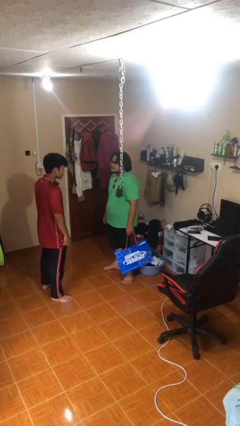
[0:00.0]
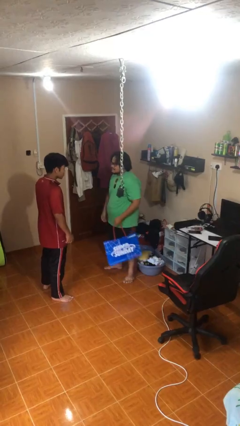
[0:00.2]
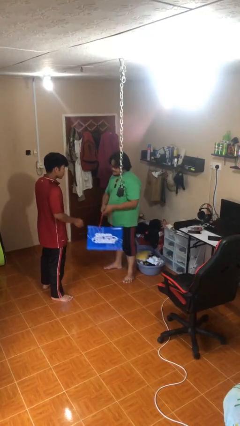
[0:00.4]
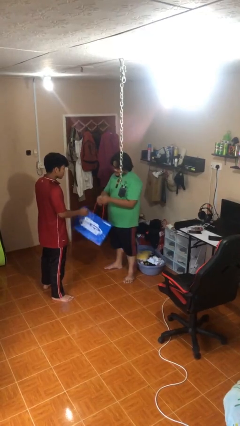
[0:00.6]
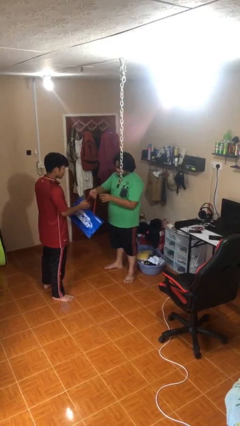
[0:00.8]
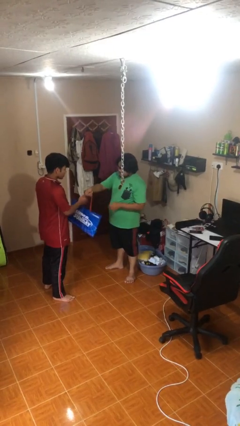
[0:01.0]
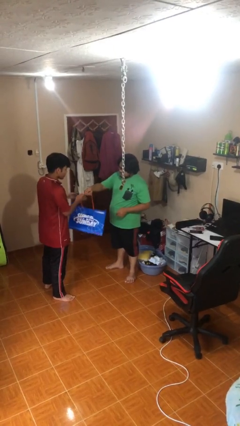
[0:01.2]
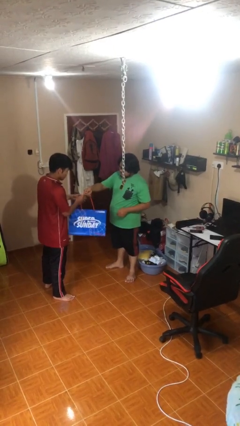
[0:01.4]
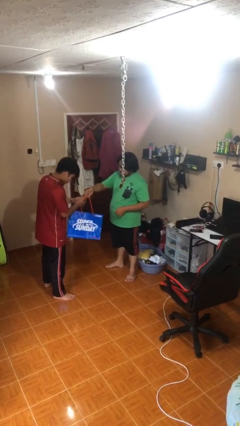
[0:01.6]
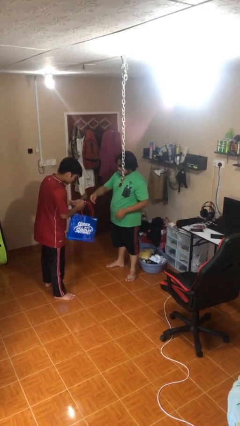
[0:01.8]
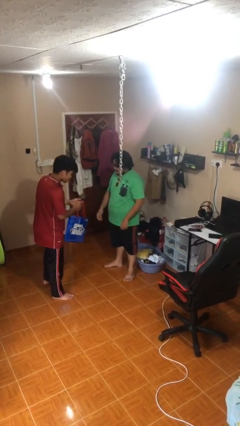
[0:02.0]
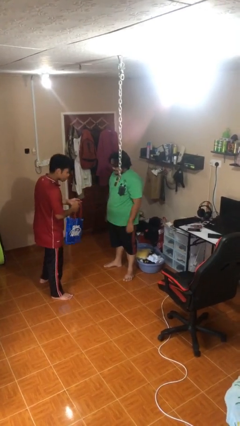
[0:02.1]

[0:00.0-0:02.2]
person transfers object to person

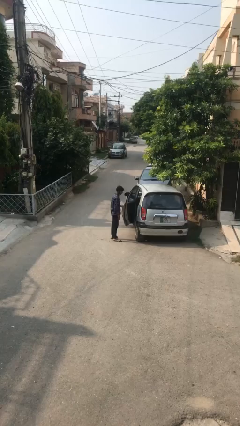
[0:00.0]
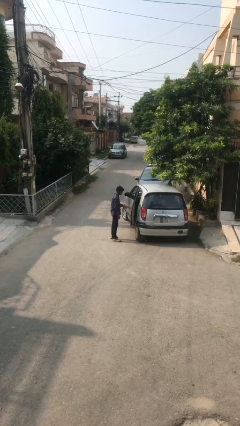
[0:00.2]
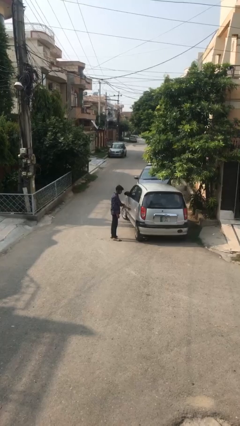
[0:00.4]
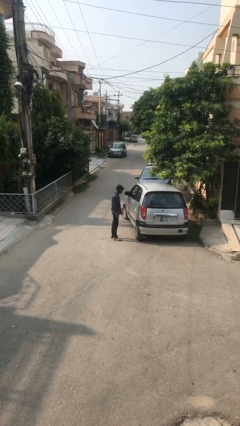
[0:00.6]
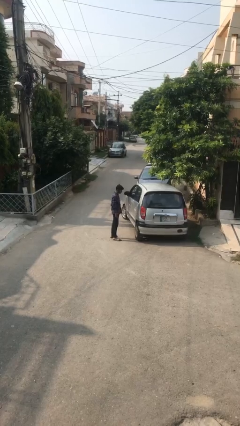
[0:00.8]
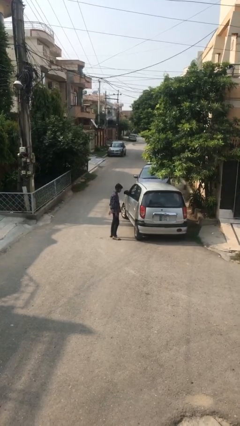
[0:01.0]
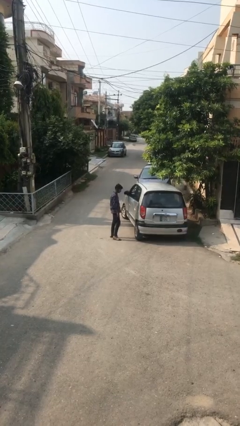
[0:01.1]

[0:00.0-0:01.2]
person closes car door

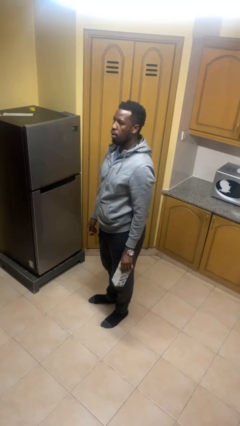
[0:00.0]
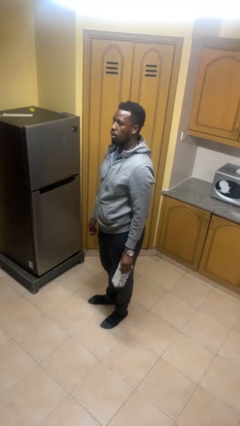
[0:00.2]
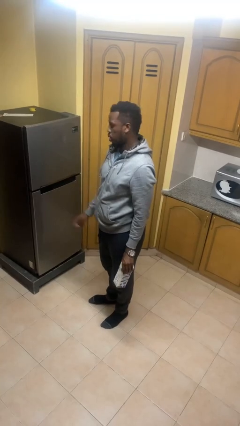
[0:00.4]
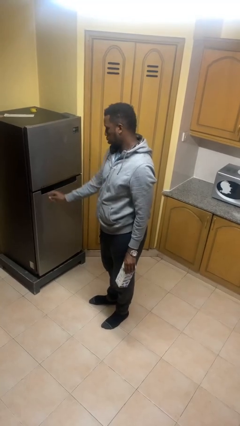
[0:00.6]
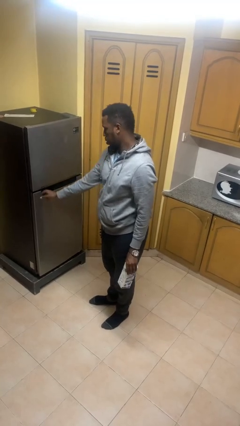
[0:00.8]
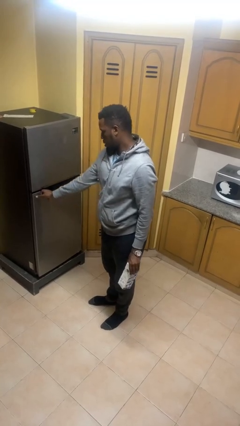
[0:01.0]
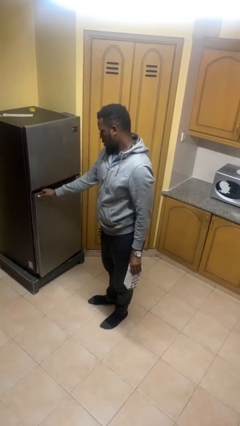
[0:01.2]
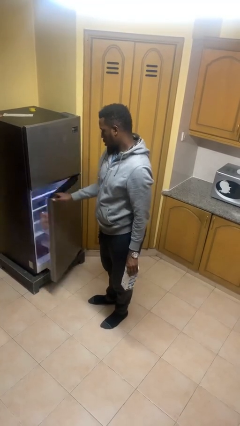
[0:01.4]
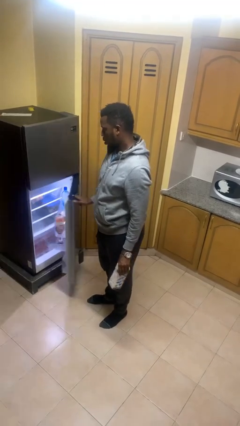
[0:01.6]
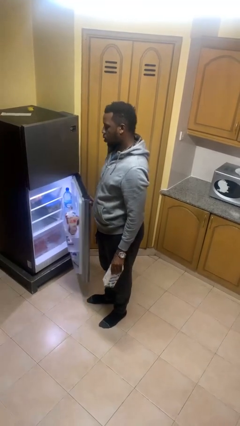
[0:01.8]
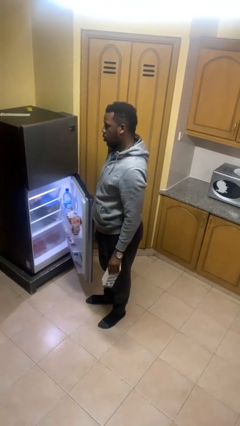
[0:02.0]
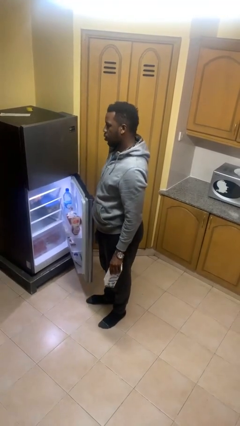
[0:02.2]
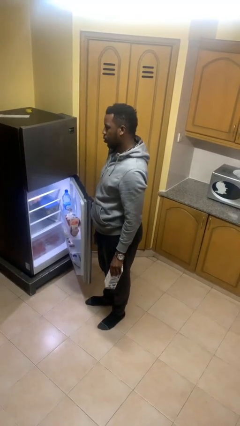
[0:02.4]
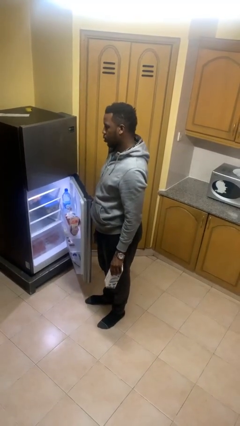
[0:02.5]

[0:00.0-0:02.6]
person opens refrigerator

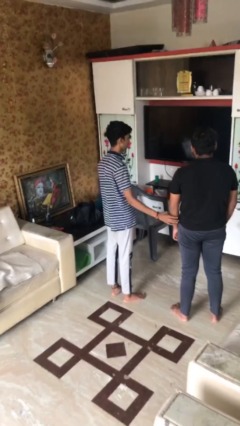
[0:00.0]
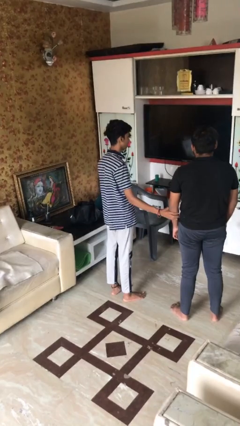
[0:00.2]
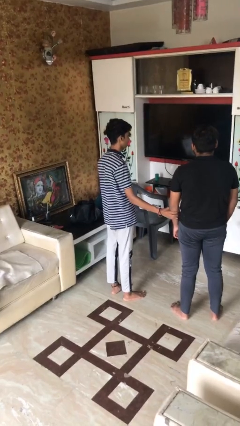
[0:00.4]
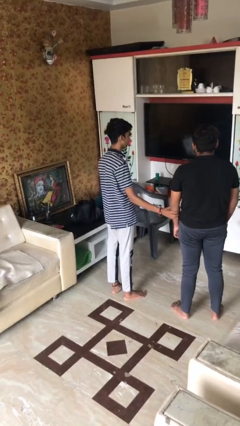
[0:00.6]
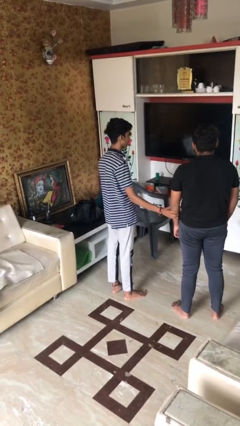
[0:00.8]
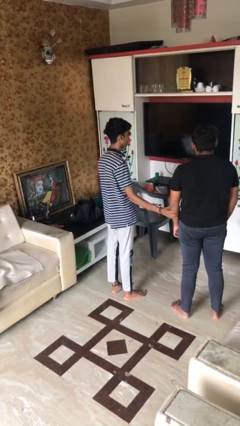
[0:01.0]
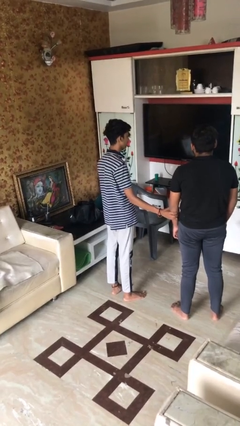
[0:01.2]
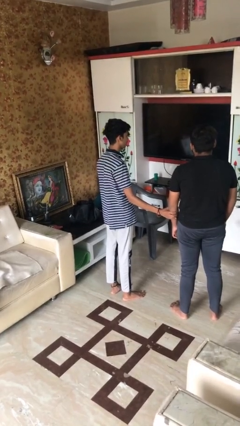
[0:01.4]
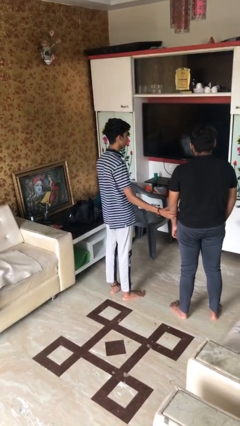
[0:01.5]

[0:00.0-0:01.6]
person grabs person by forearm

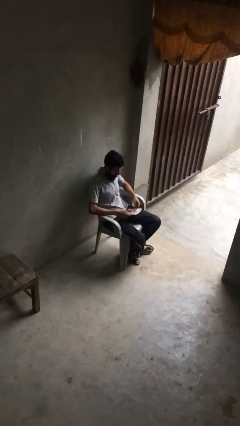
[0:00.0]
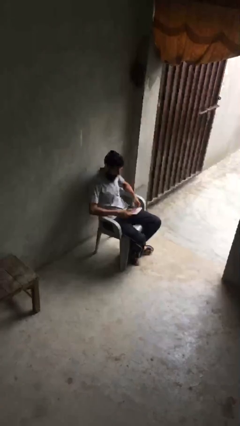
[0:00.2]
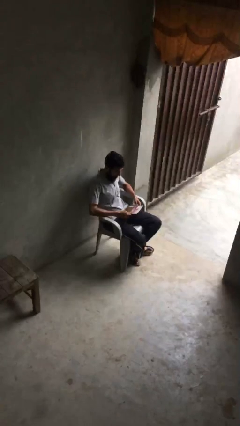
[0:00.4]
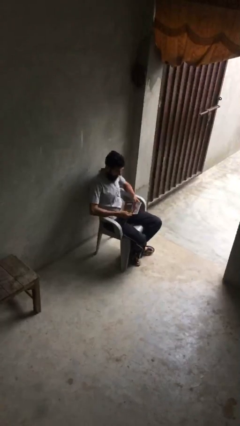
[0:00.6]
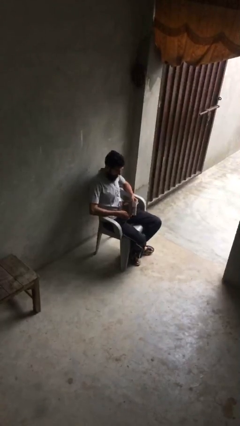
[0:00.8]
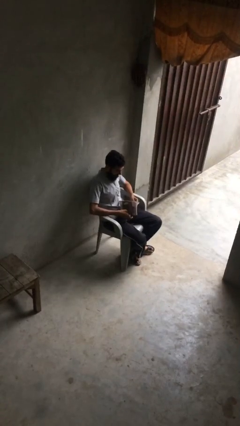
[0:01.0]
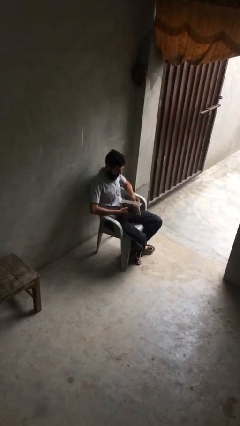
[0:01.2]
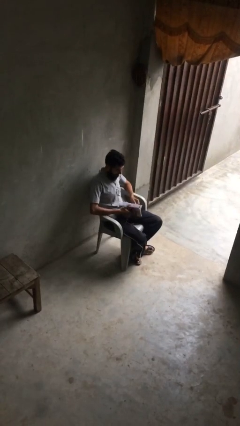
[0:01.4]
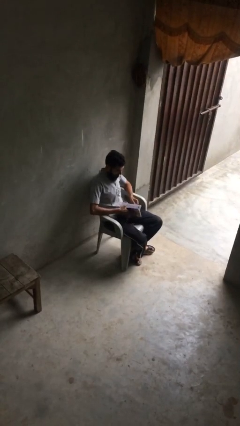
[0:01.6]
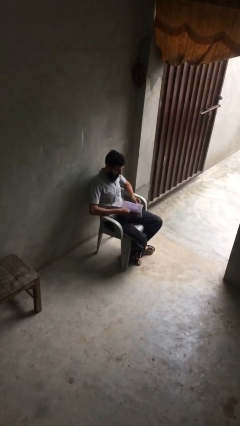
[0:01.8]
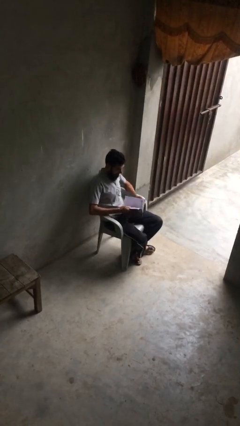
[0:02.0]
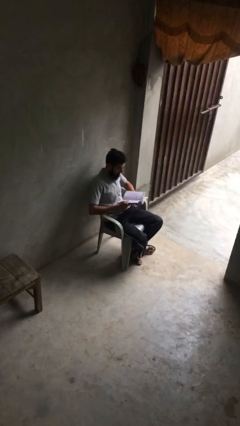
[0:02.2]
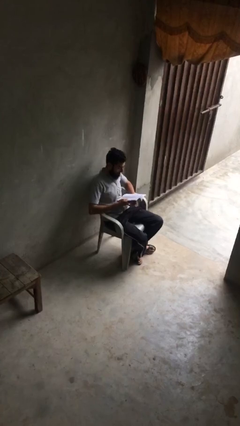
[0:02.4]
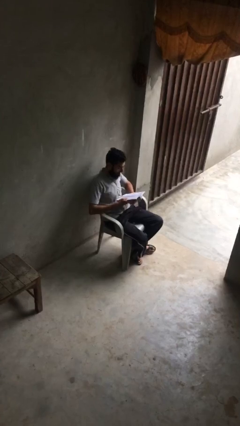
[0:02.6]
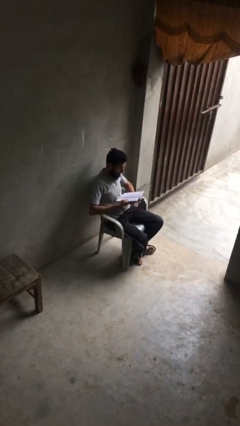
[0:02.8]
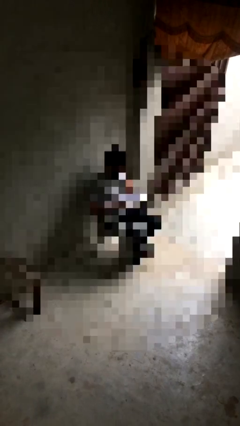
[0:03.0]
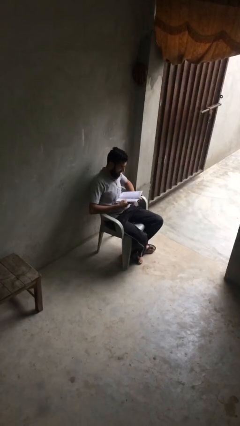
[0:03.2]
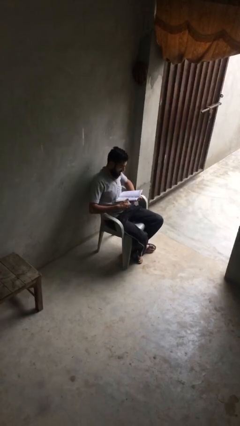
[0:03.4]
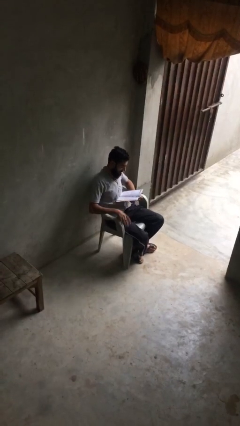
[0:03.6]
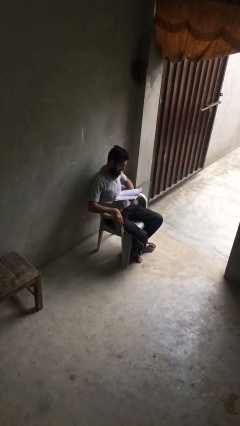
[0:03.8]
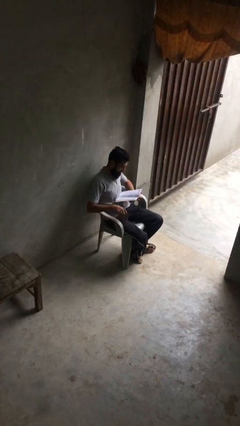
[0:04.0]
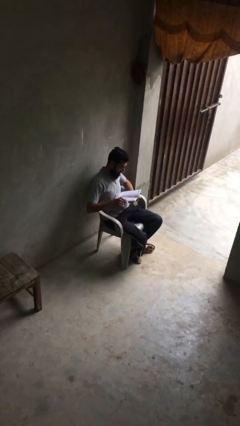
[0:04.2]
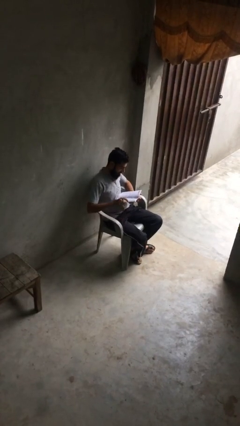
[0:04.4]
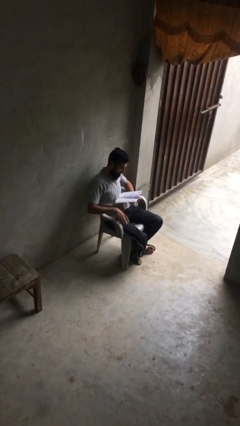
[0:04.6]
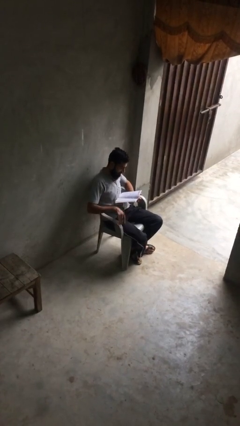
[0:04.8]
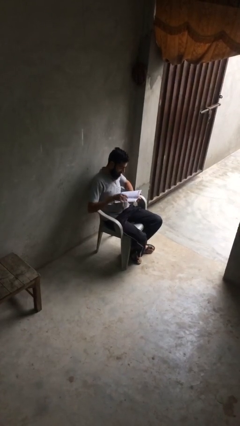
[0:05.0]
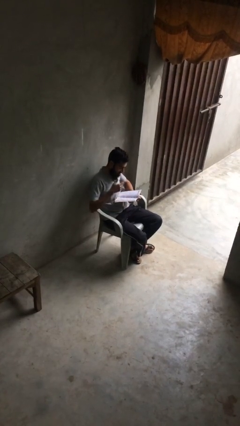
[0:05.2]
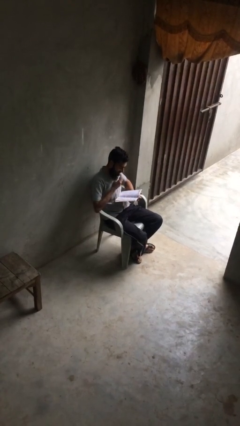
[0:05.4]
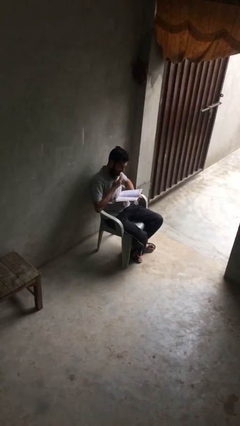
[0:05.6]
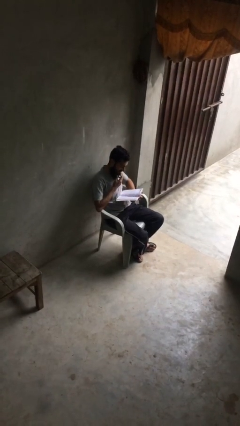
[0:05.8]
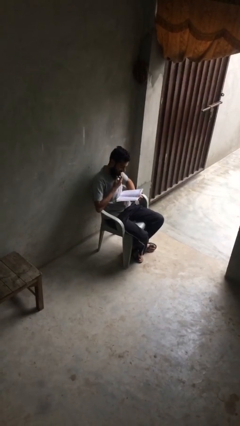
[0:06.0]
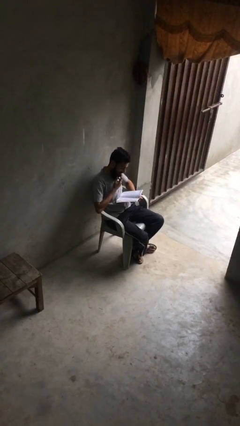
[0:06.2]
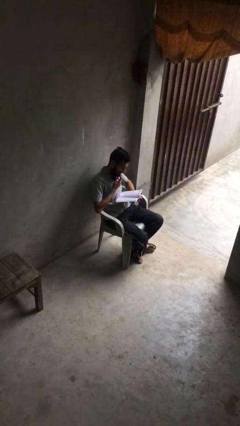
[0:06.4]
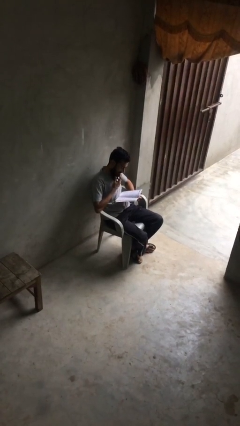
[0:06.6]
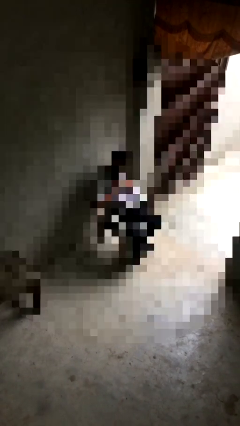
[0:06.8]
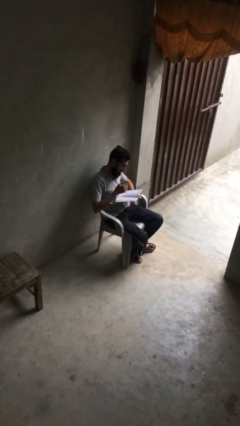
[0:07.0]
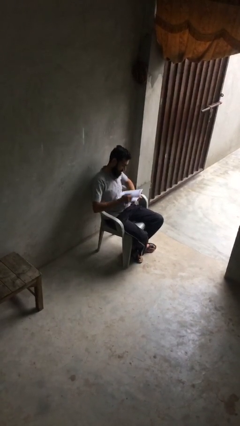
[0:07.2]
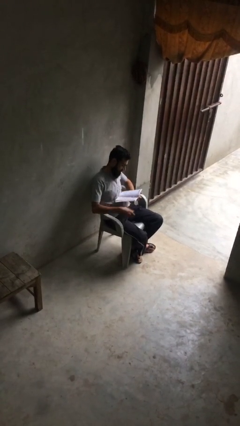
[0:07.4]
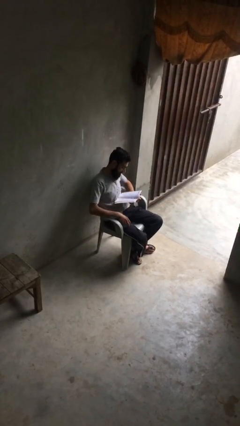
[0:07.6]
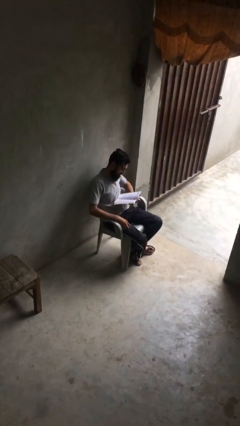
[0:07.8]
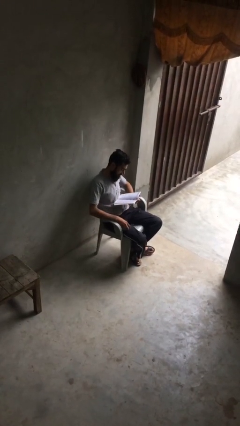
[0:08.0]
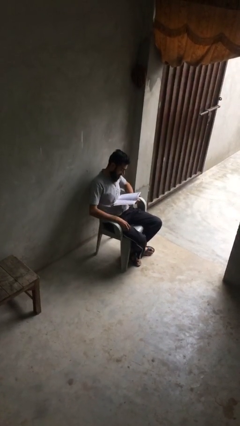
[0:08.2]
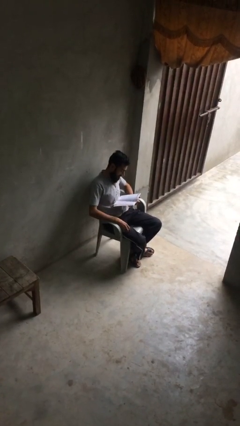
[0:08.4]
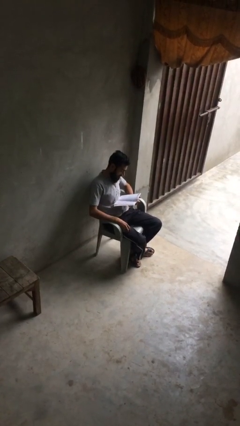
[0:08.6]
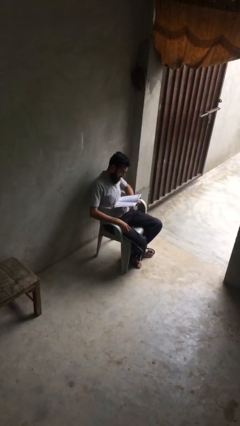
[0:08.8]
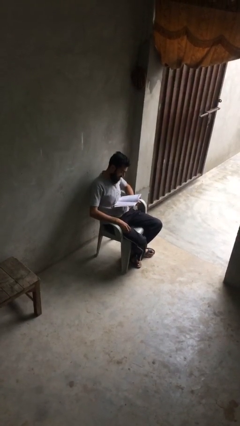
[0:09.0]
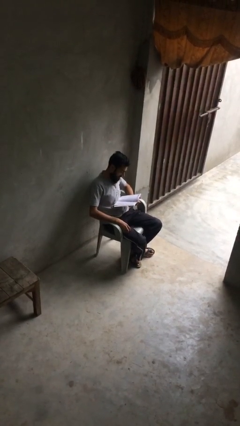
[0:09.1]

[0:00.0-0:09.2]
person reads document

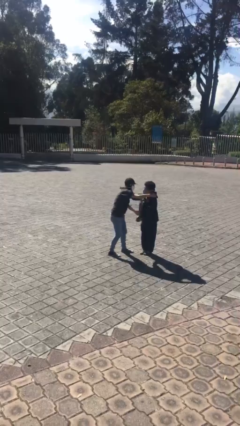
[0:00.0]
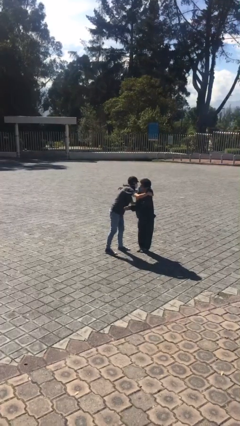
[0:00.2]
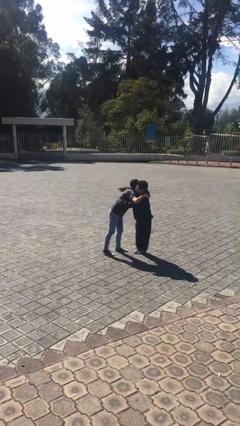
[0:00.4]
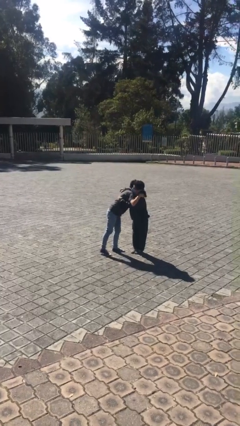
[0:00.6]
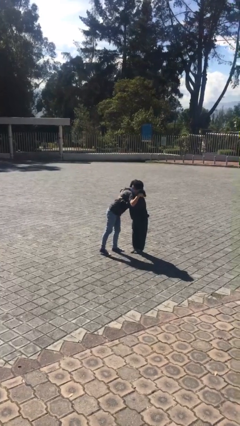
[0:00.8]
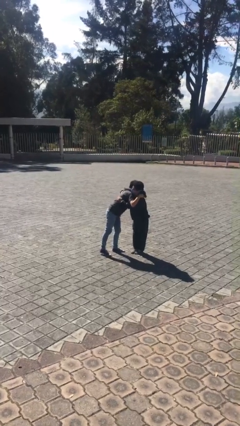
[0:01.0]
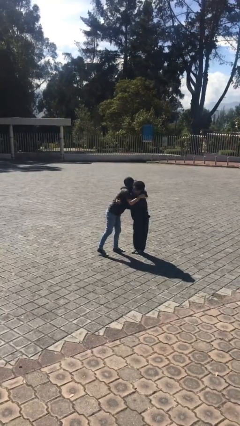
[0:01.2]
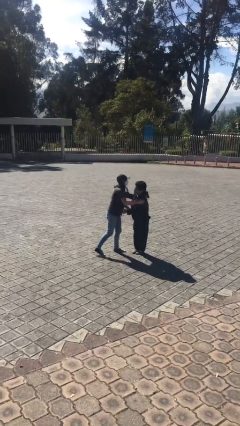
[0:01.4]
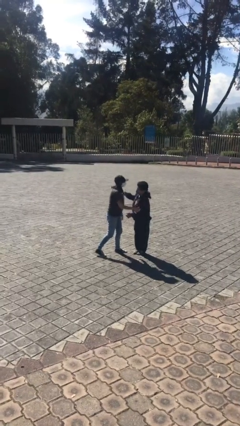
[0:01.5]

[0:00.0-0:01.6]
person embraces person
